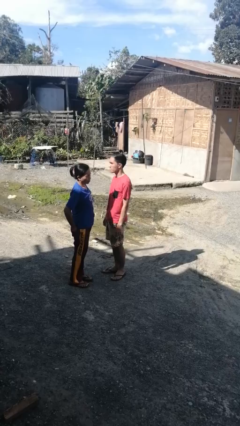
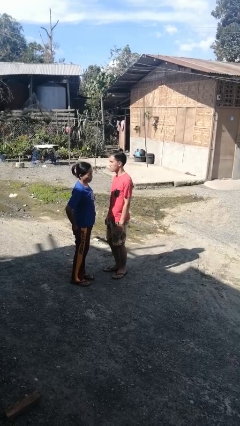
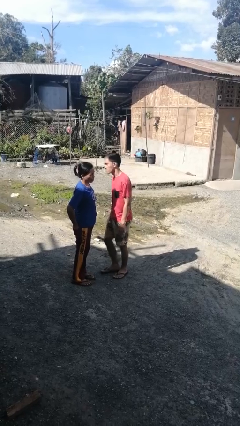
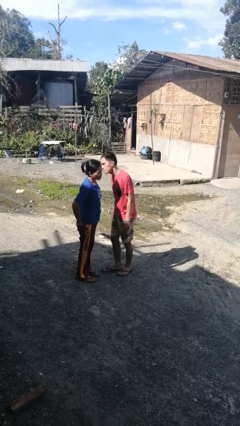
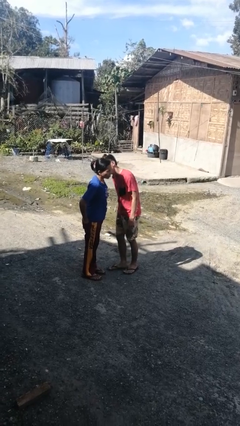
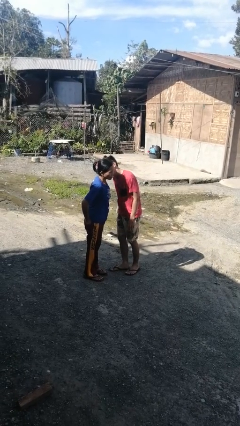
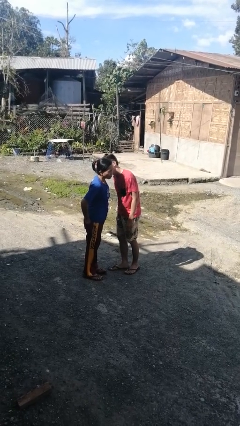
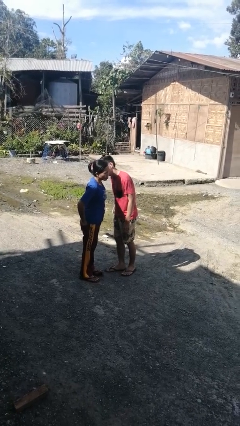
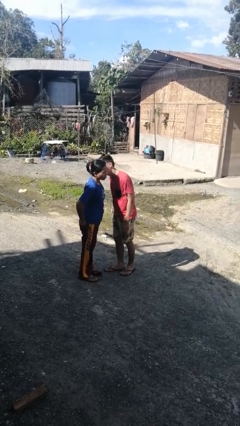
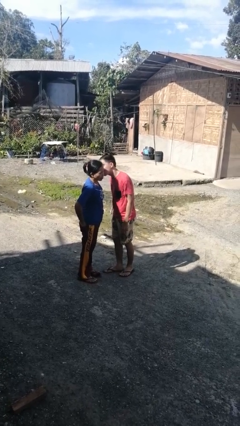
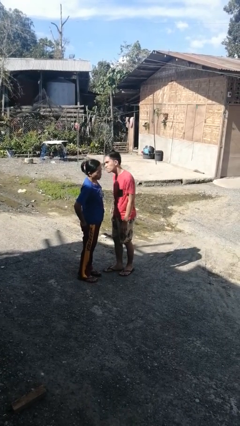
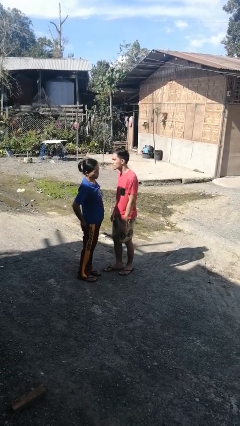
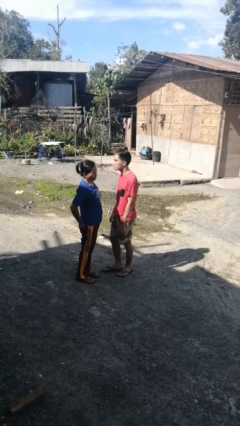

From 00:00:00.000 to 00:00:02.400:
person kisses cheek of person

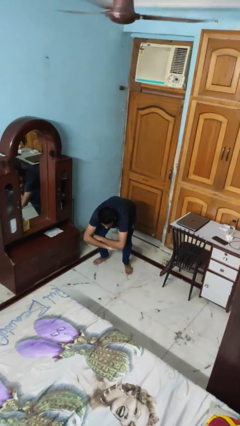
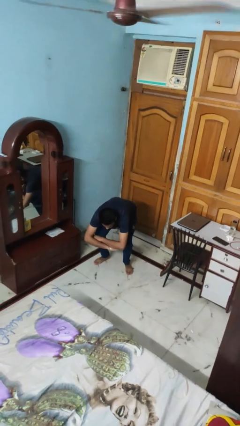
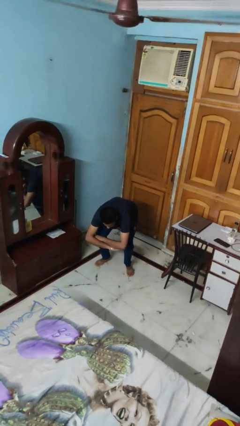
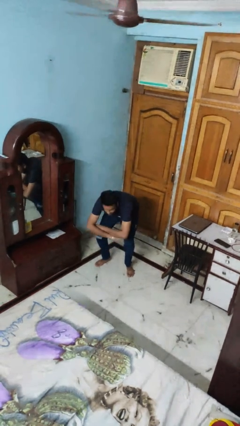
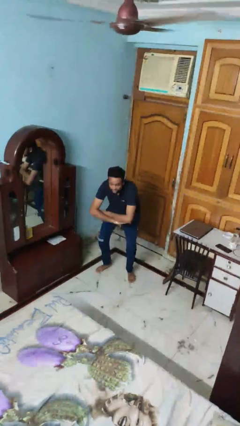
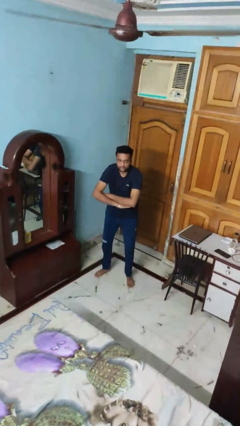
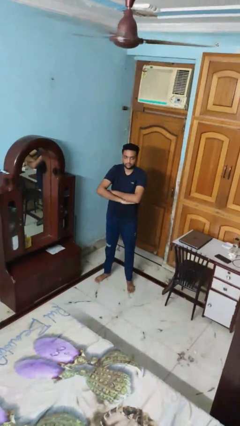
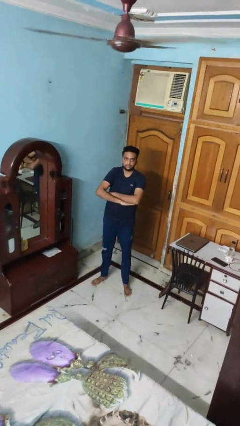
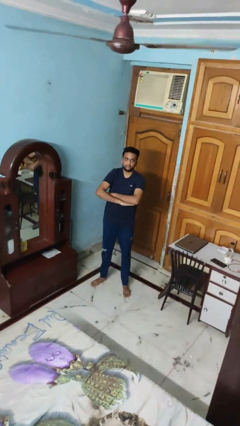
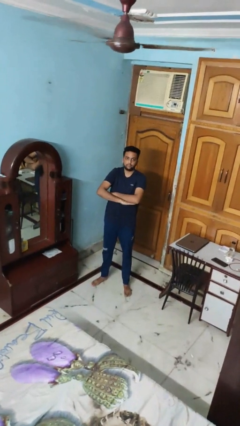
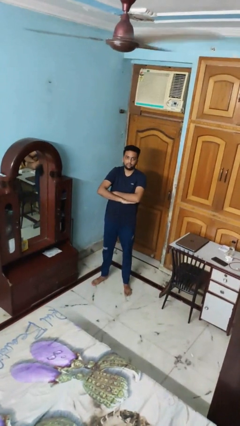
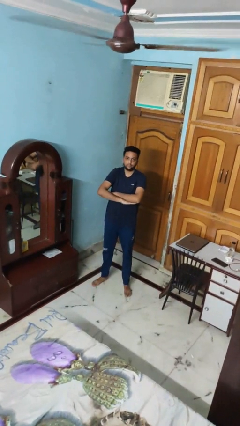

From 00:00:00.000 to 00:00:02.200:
person stands up

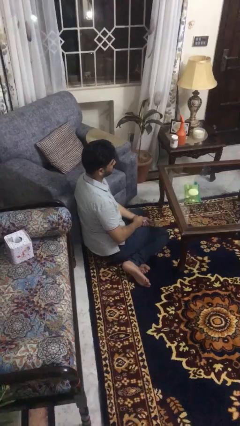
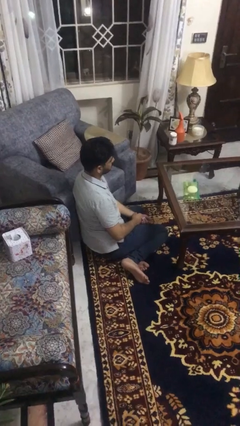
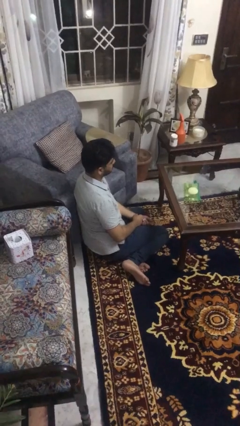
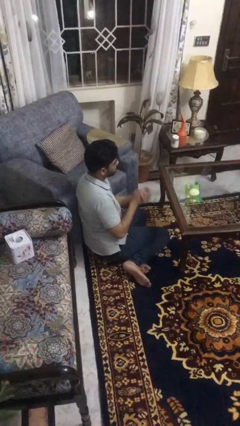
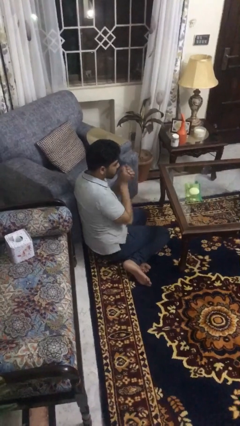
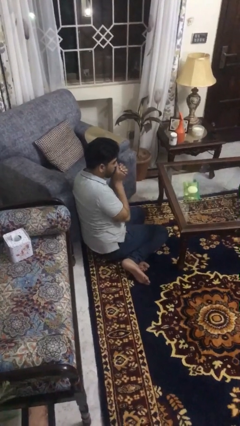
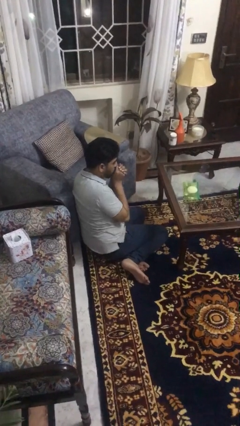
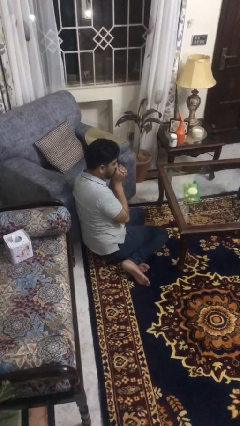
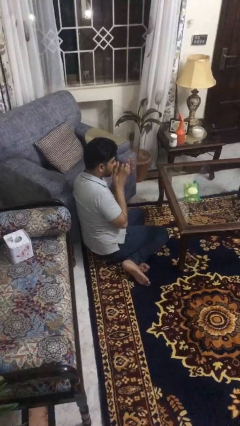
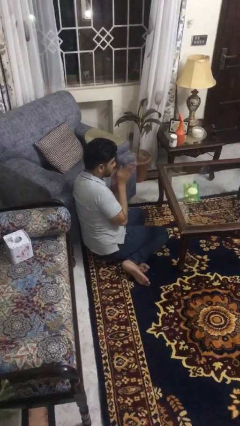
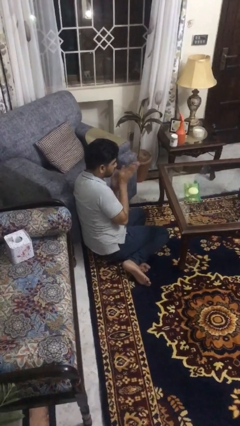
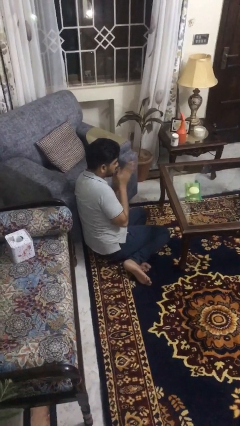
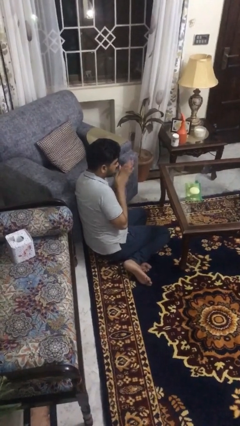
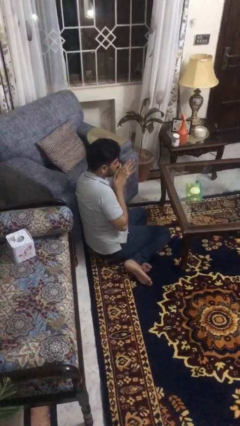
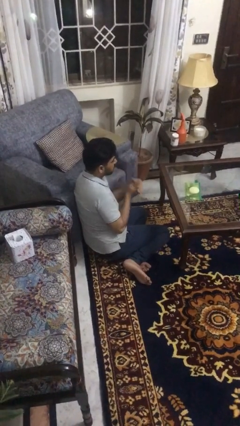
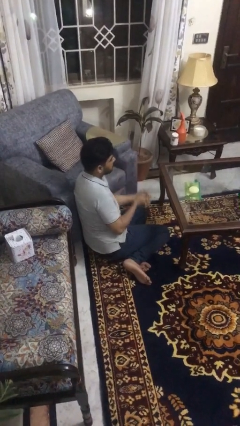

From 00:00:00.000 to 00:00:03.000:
person blows into hands

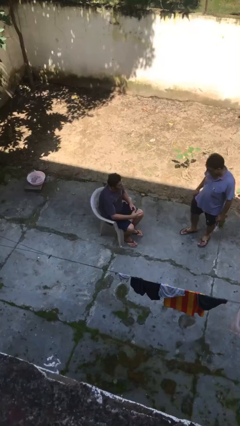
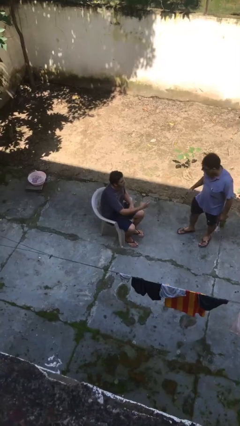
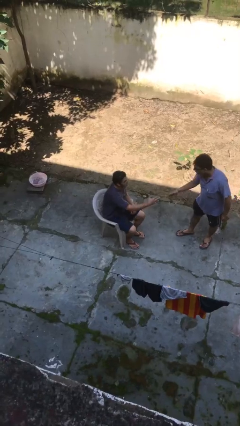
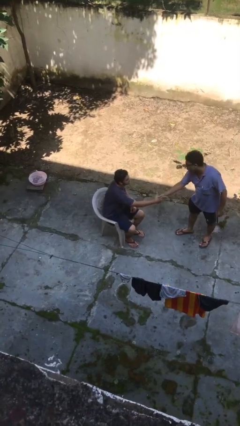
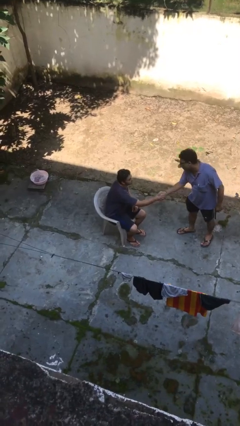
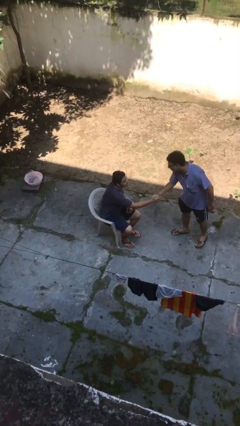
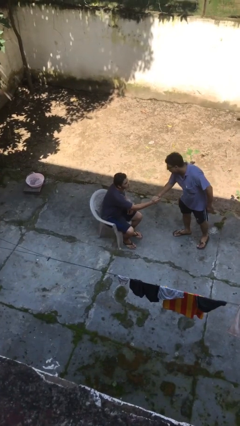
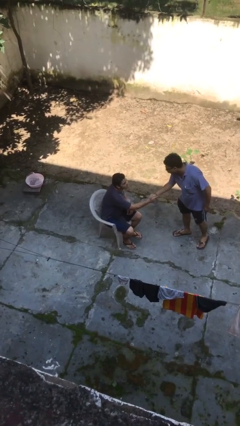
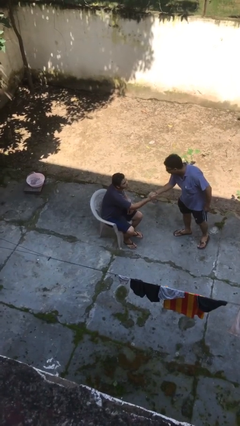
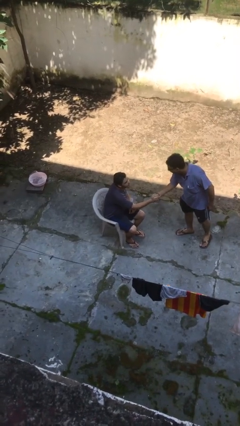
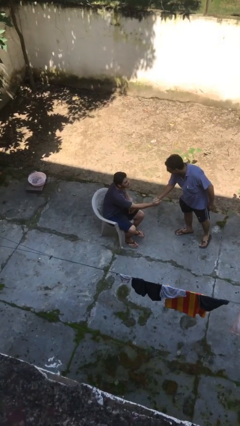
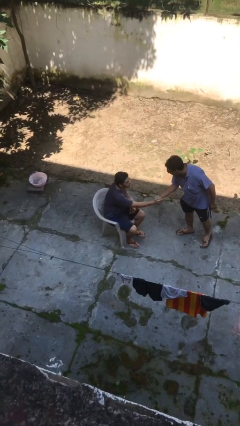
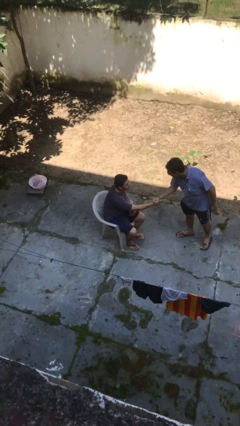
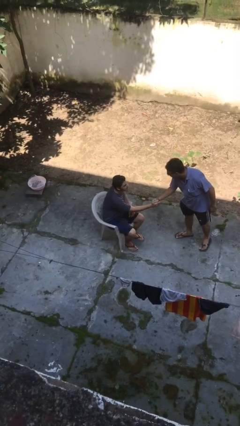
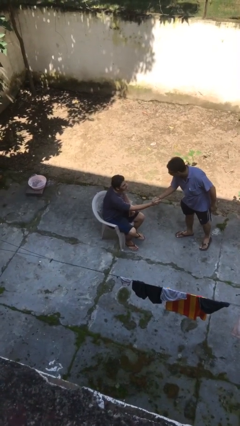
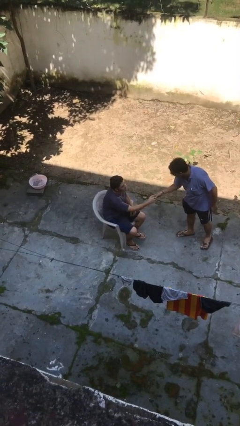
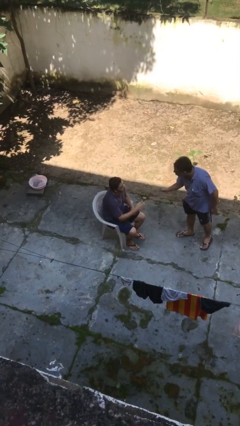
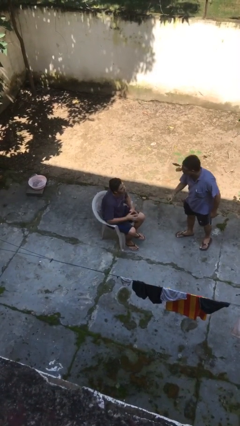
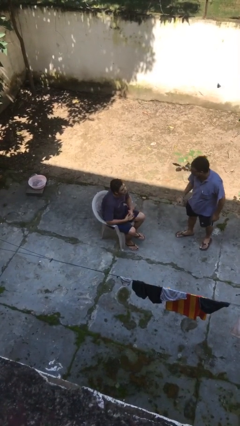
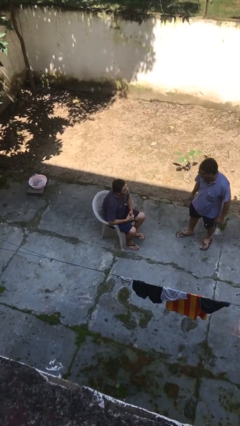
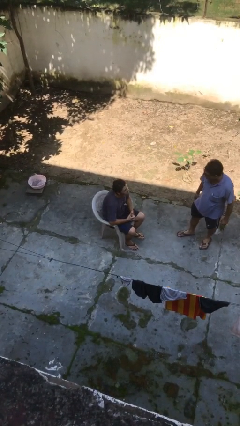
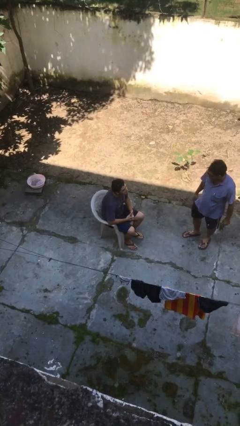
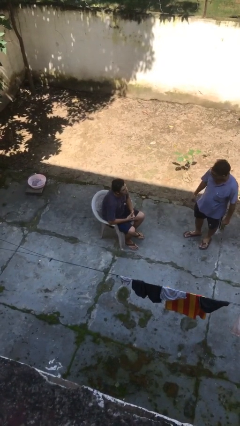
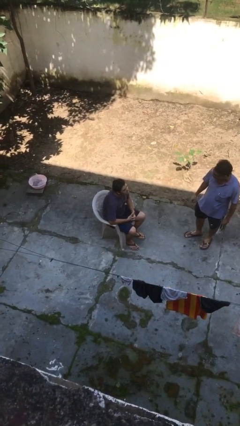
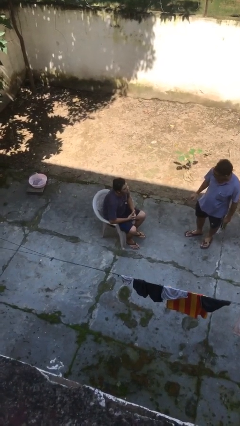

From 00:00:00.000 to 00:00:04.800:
person shakes hand

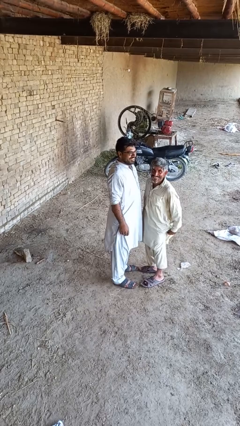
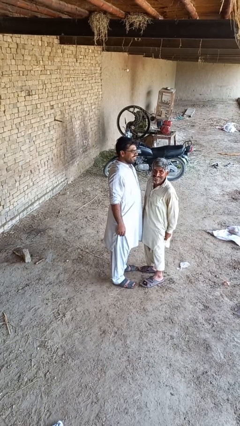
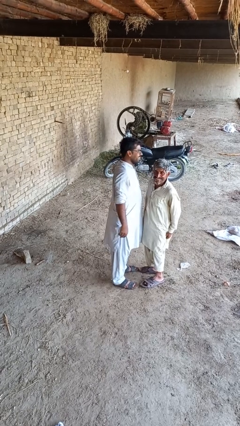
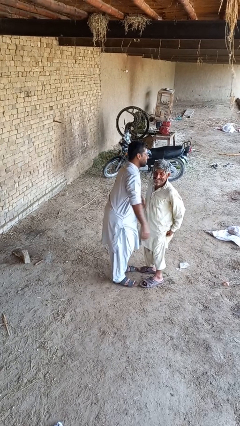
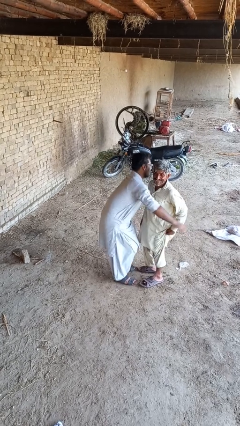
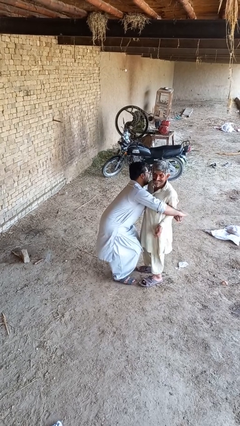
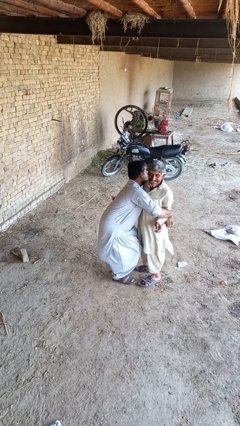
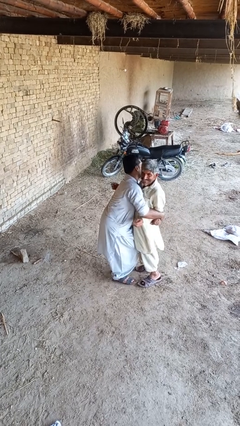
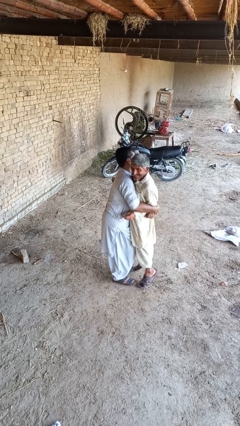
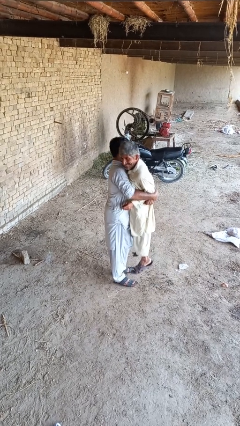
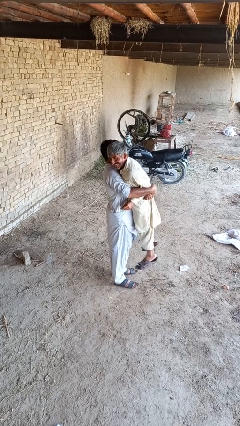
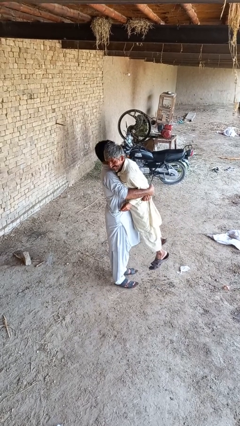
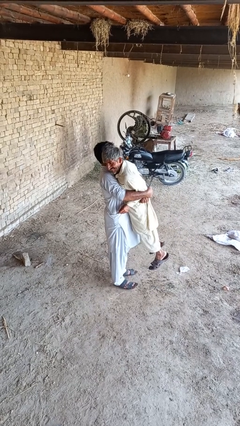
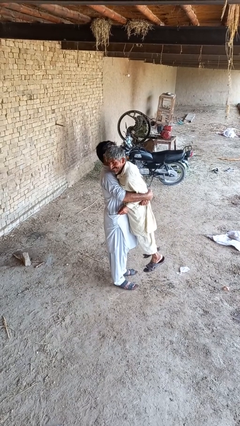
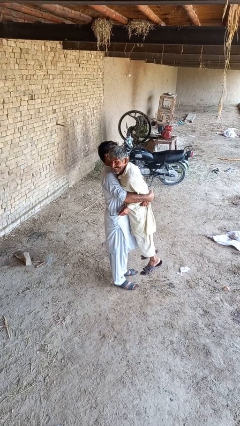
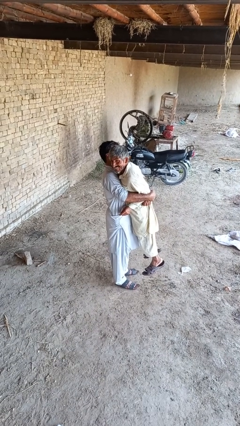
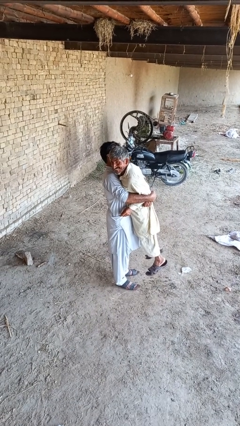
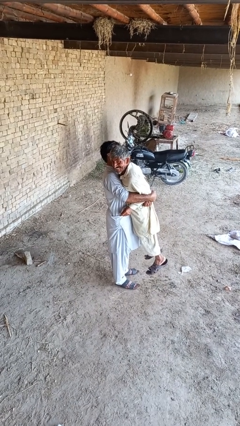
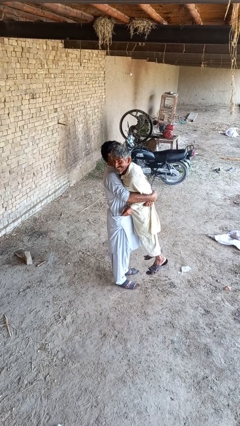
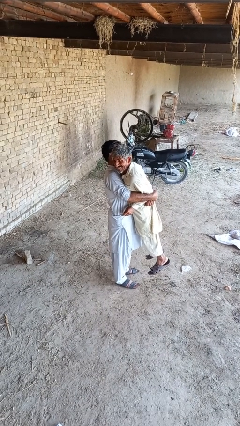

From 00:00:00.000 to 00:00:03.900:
person picks up person

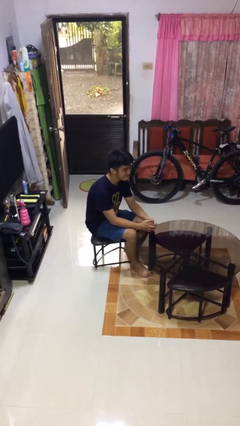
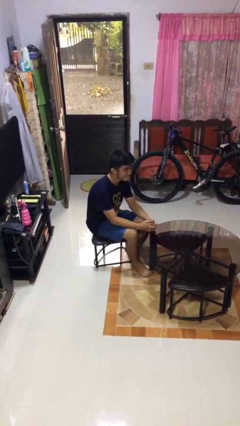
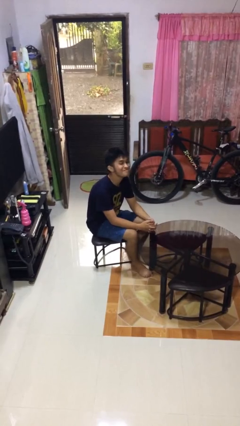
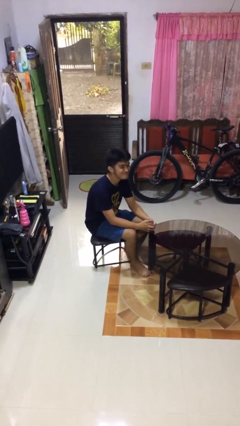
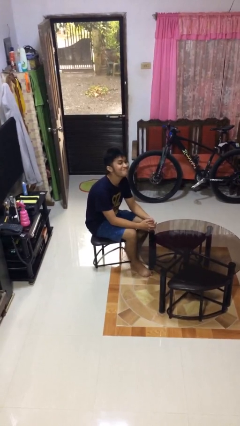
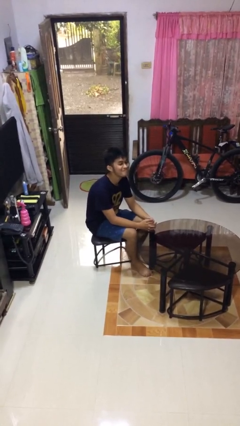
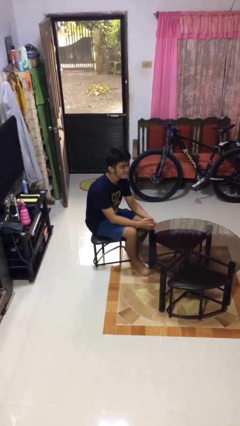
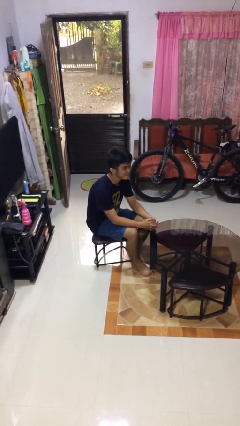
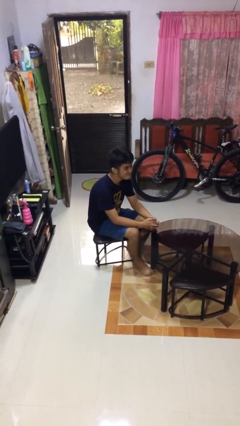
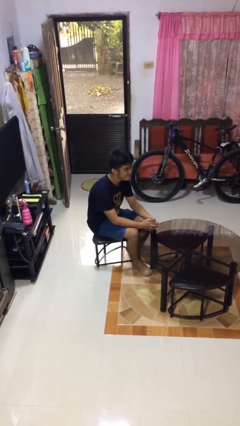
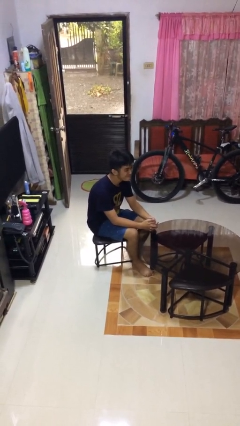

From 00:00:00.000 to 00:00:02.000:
person nods head
